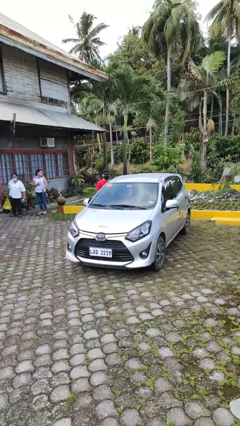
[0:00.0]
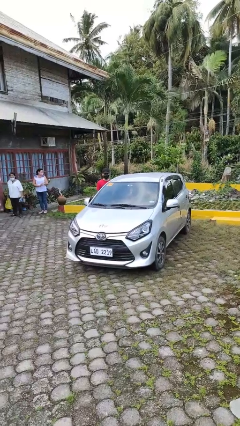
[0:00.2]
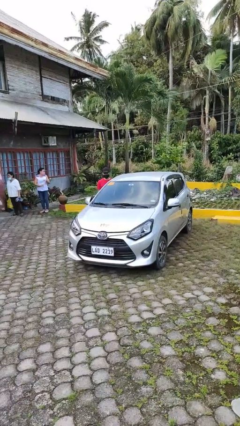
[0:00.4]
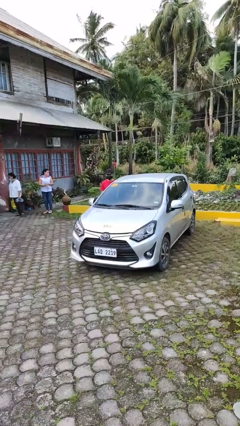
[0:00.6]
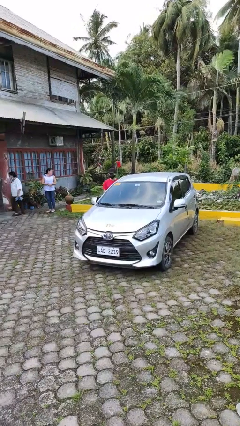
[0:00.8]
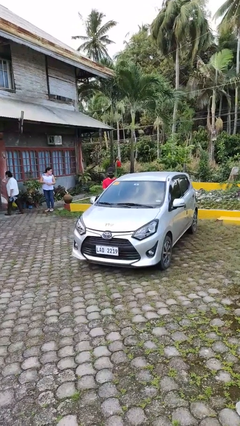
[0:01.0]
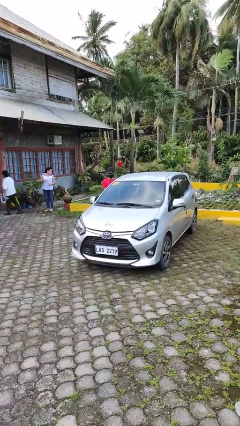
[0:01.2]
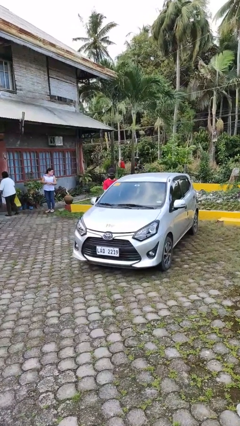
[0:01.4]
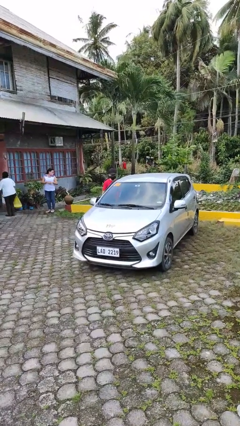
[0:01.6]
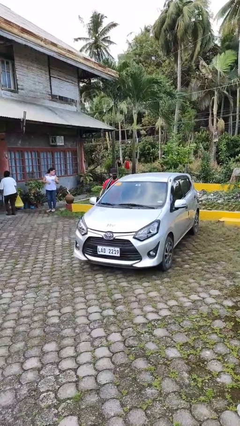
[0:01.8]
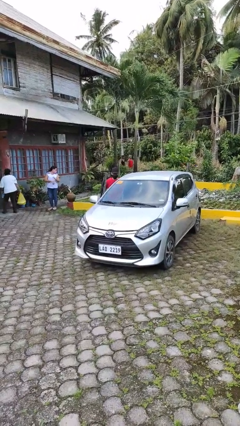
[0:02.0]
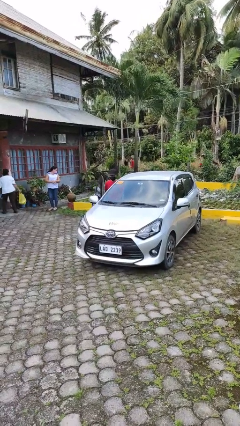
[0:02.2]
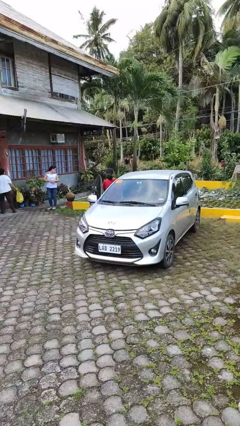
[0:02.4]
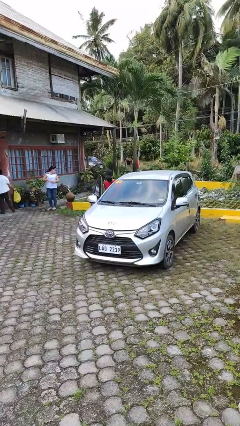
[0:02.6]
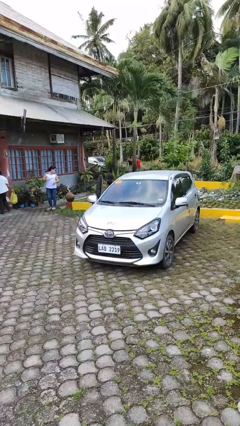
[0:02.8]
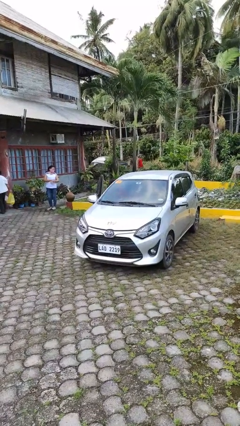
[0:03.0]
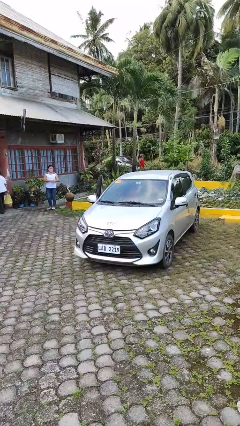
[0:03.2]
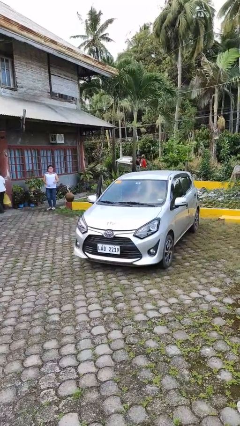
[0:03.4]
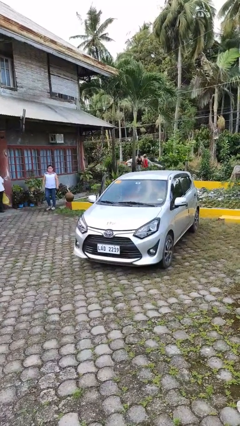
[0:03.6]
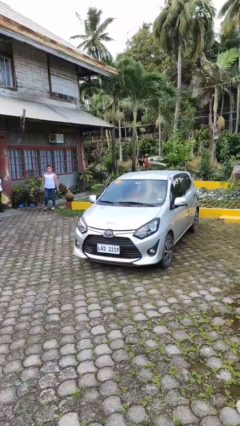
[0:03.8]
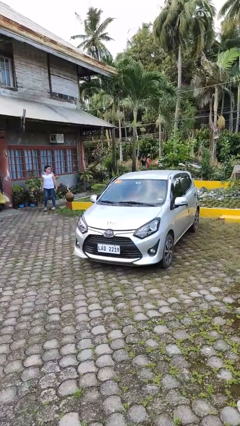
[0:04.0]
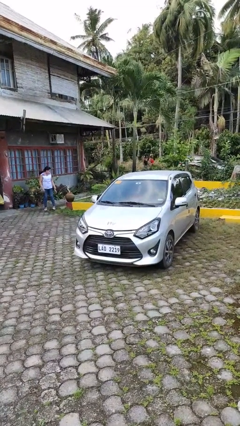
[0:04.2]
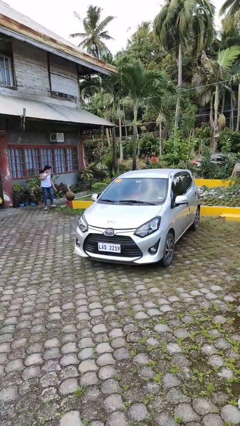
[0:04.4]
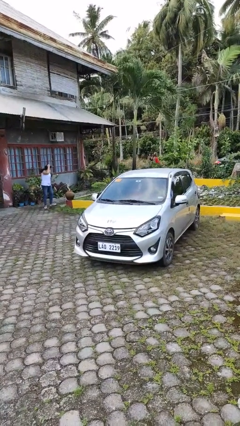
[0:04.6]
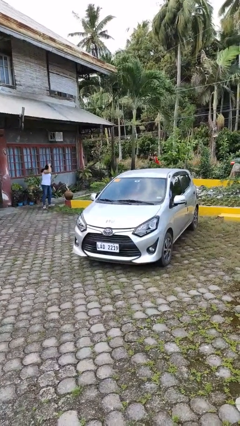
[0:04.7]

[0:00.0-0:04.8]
car picks up person

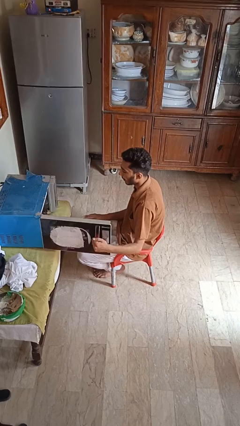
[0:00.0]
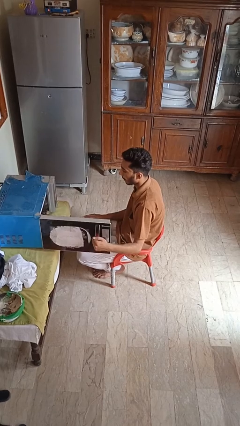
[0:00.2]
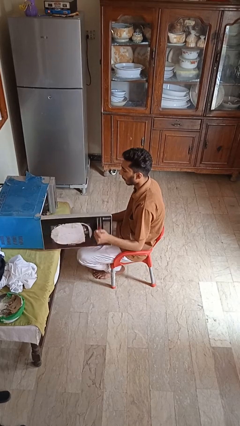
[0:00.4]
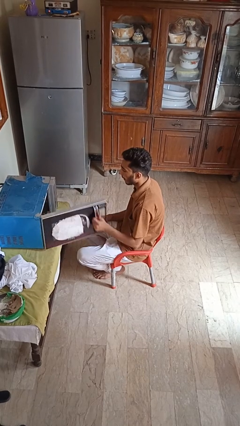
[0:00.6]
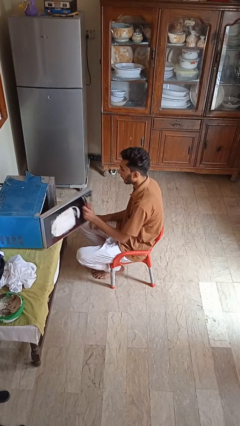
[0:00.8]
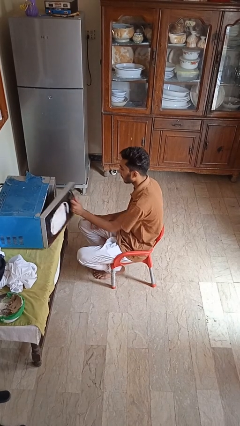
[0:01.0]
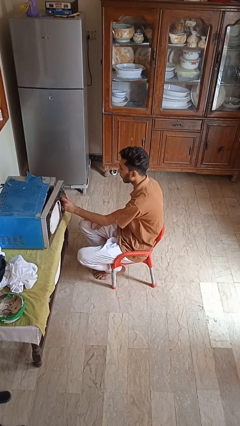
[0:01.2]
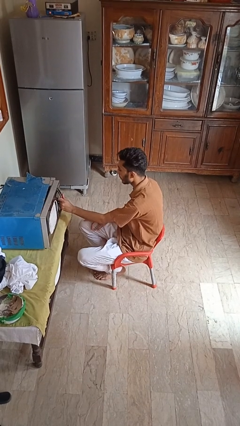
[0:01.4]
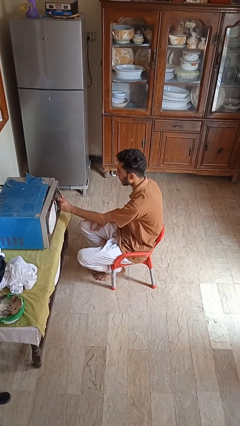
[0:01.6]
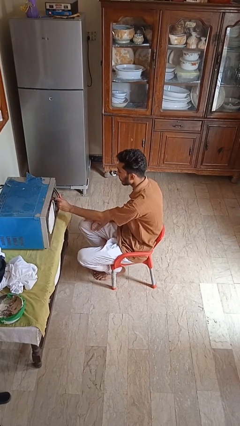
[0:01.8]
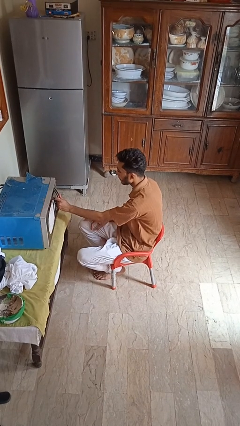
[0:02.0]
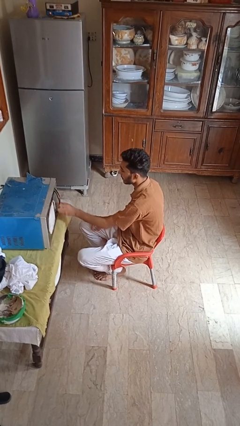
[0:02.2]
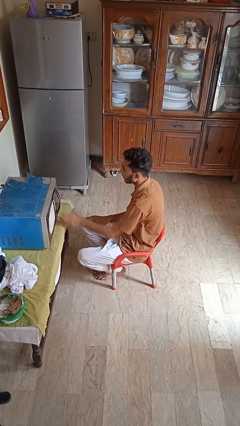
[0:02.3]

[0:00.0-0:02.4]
person closes microwave

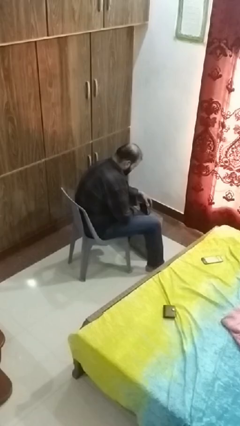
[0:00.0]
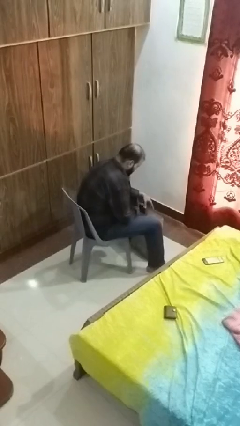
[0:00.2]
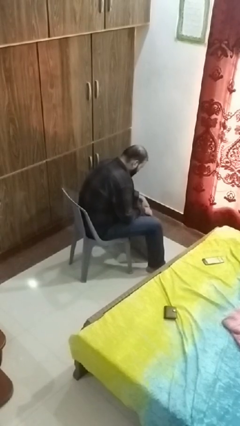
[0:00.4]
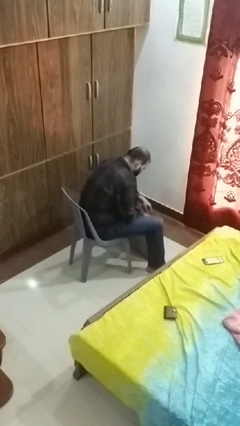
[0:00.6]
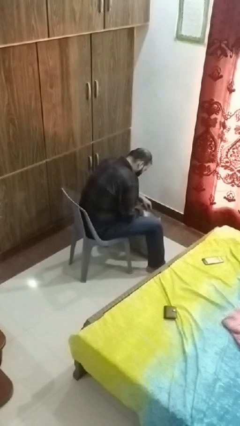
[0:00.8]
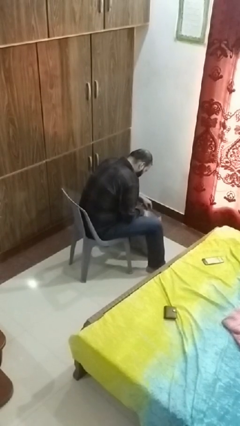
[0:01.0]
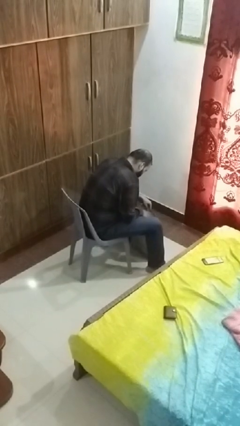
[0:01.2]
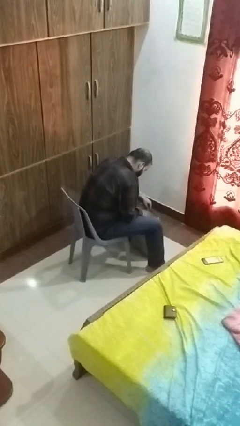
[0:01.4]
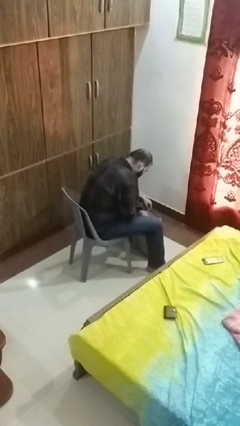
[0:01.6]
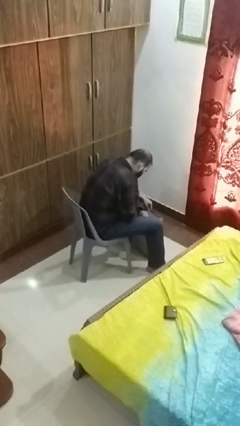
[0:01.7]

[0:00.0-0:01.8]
person searches in bag

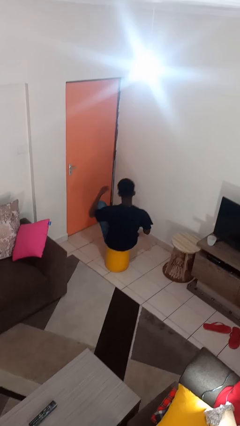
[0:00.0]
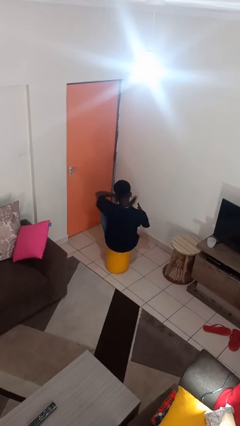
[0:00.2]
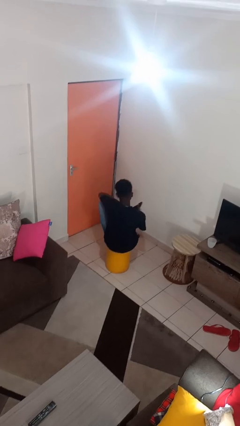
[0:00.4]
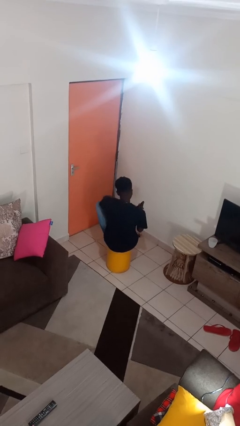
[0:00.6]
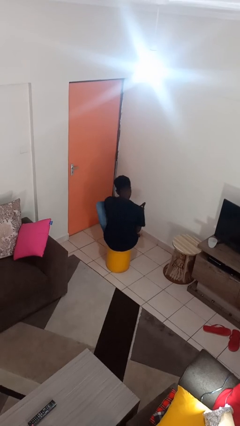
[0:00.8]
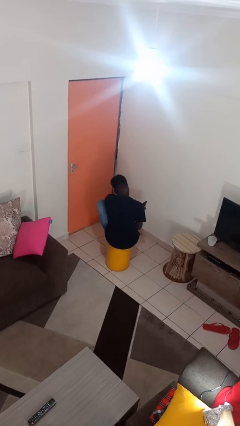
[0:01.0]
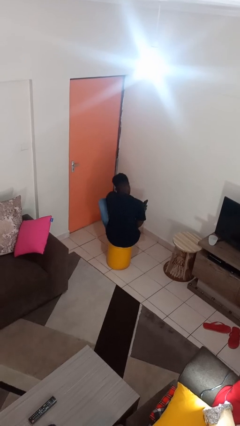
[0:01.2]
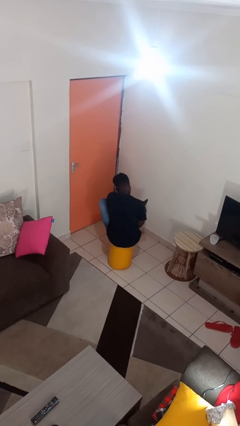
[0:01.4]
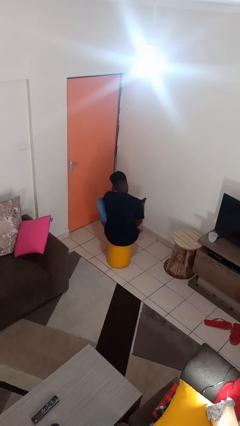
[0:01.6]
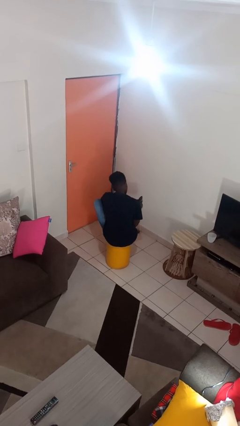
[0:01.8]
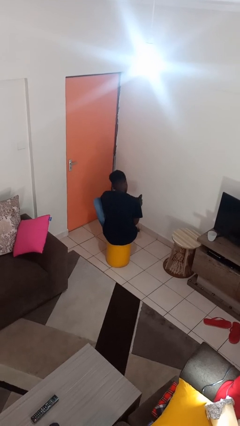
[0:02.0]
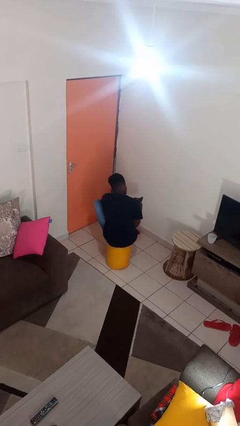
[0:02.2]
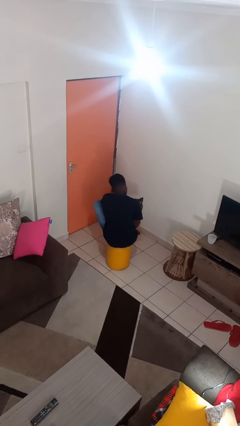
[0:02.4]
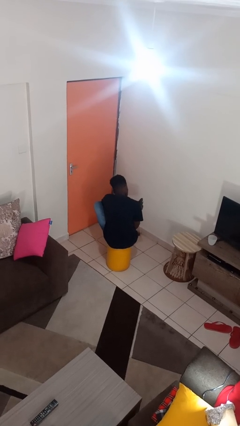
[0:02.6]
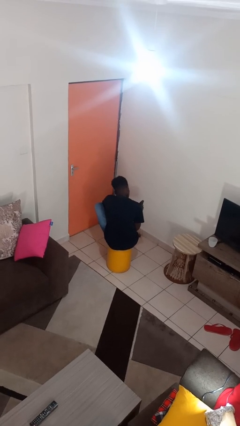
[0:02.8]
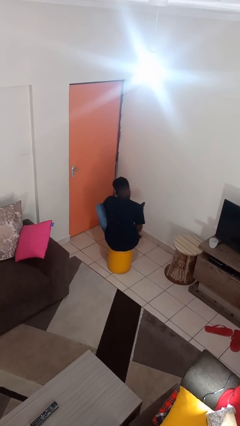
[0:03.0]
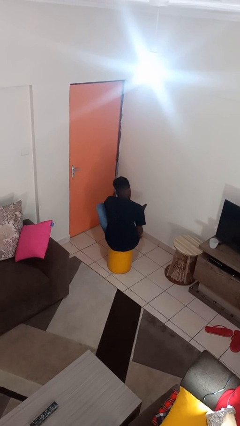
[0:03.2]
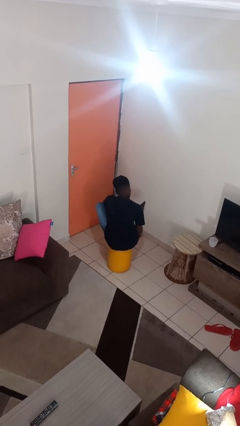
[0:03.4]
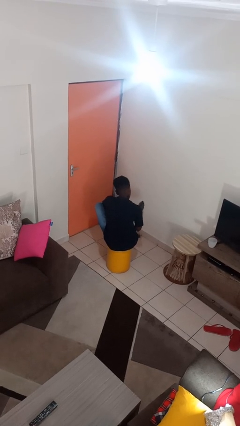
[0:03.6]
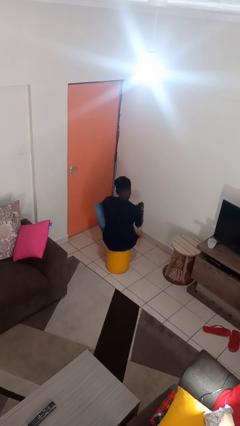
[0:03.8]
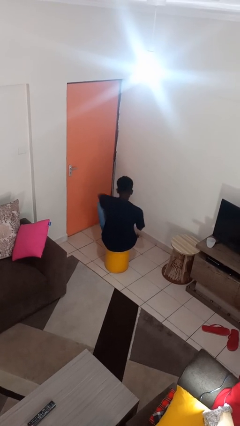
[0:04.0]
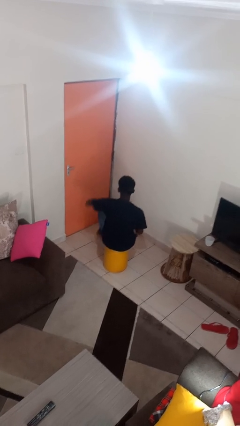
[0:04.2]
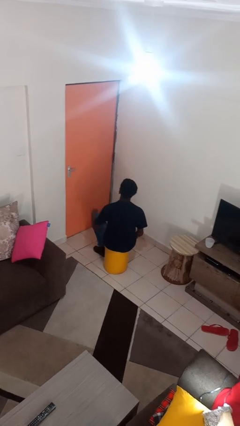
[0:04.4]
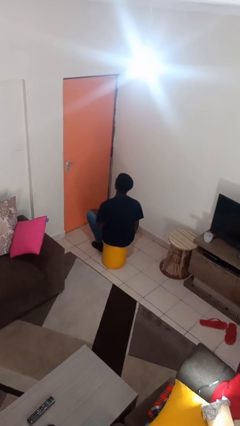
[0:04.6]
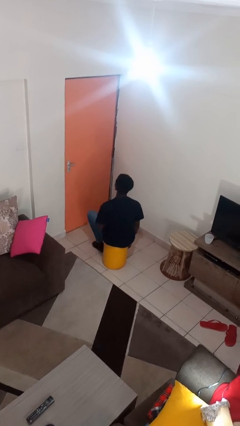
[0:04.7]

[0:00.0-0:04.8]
person rubs foot

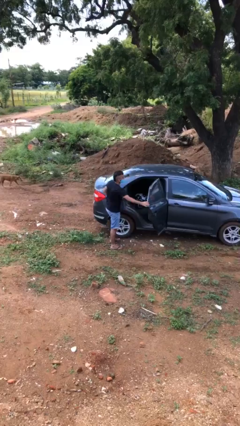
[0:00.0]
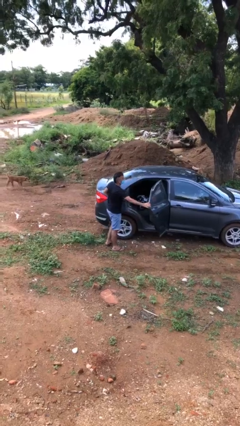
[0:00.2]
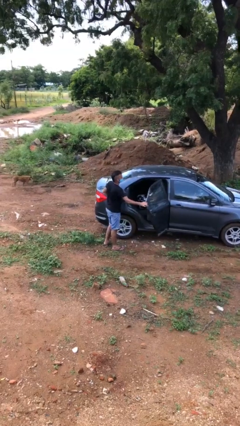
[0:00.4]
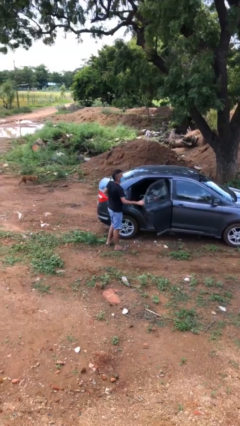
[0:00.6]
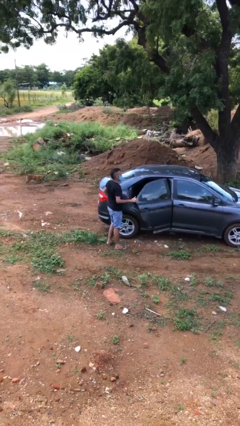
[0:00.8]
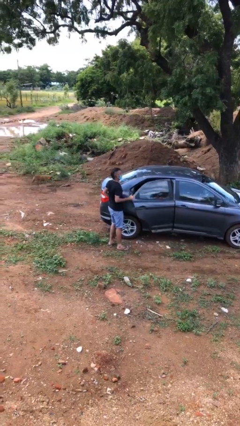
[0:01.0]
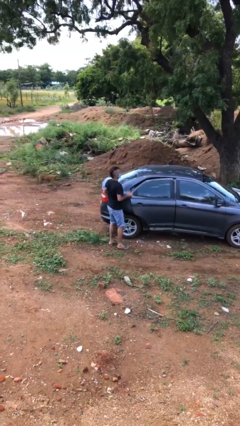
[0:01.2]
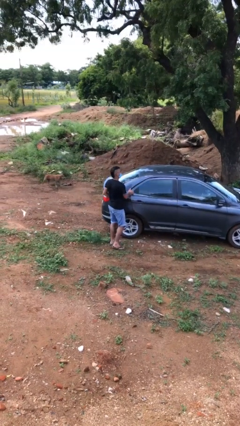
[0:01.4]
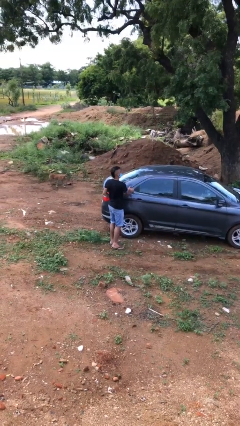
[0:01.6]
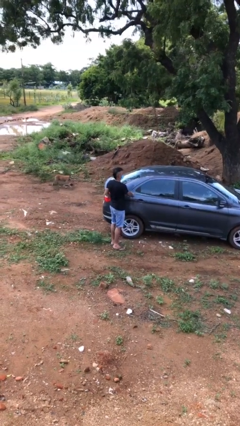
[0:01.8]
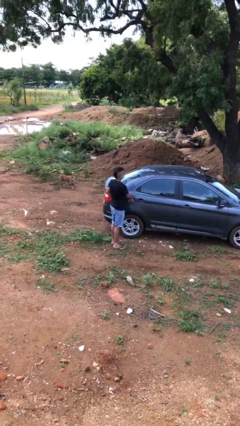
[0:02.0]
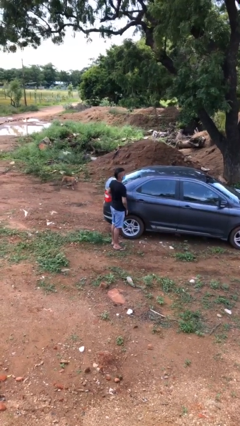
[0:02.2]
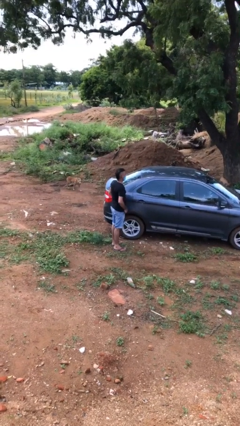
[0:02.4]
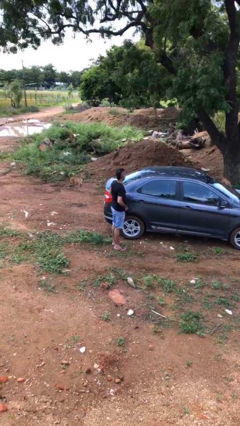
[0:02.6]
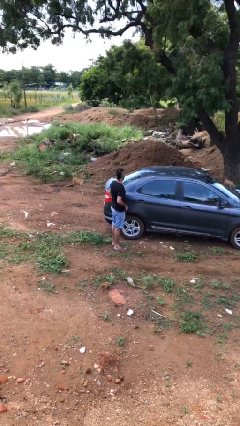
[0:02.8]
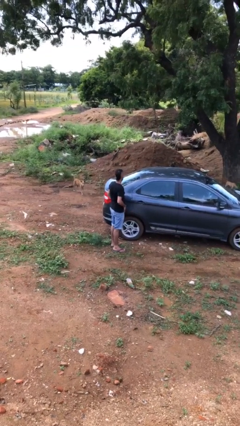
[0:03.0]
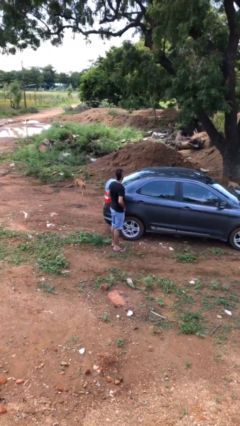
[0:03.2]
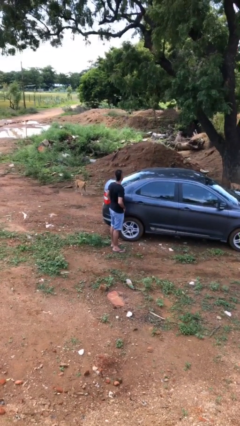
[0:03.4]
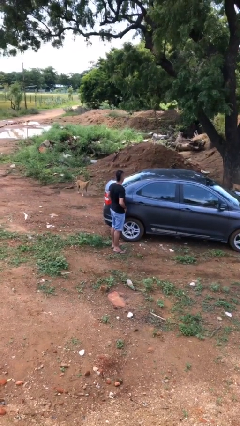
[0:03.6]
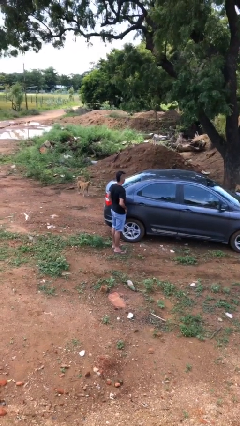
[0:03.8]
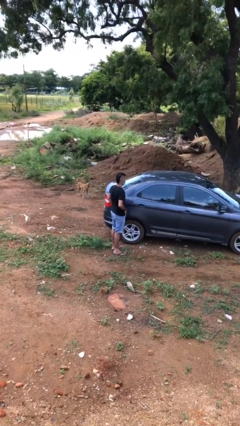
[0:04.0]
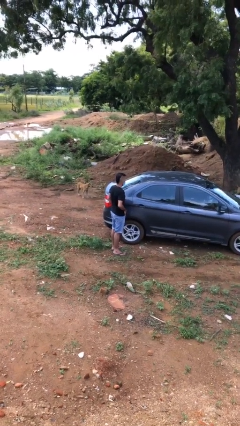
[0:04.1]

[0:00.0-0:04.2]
person closes car door
